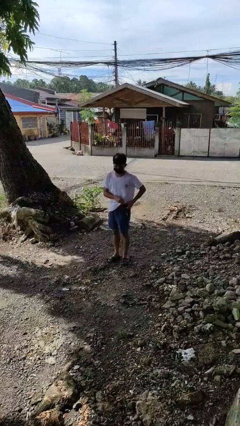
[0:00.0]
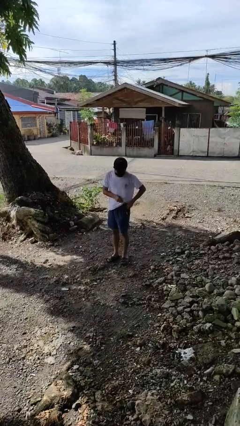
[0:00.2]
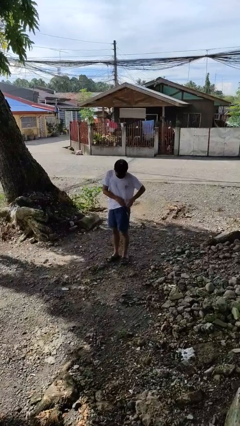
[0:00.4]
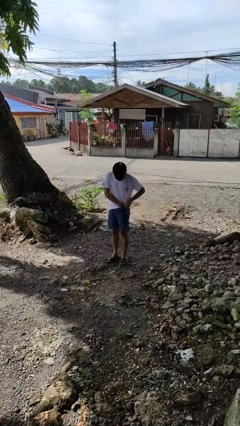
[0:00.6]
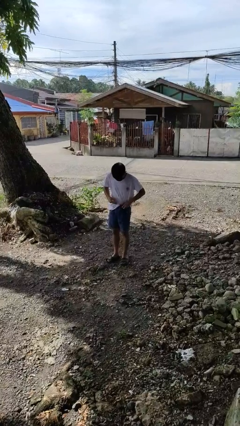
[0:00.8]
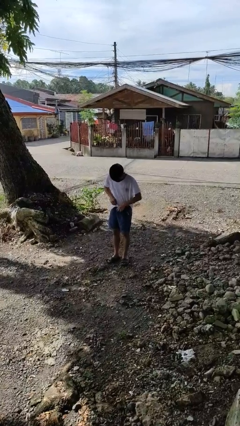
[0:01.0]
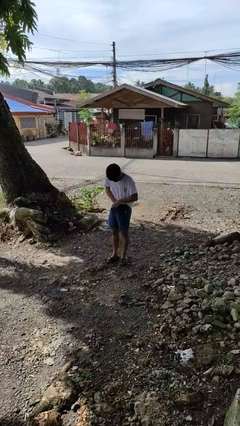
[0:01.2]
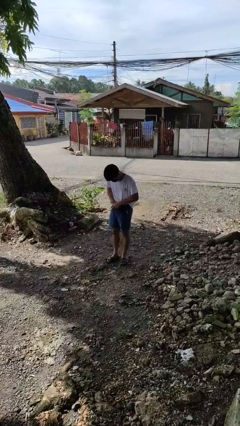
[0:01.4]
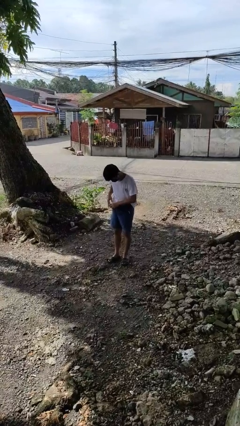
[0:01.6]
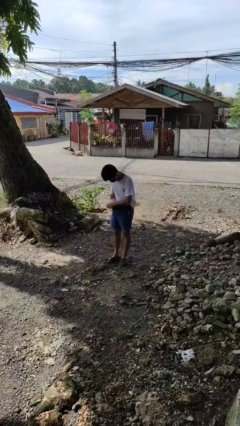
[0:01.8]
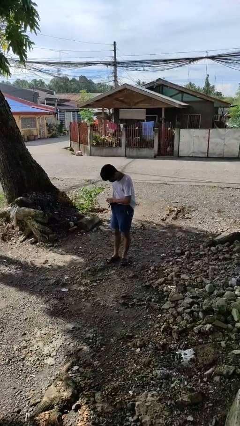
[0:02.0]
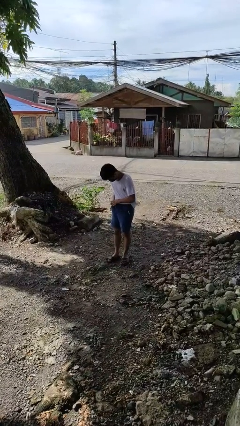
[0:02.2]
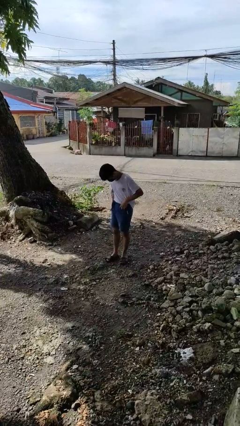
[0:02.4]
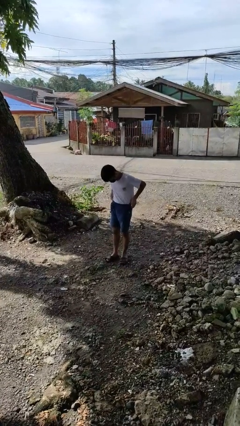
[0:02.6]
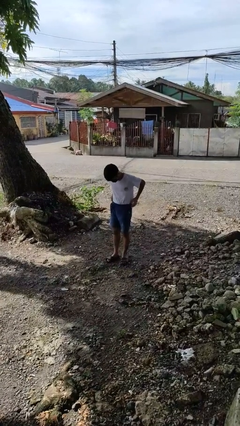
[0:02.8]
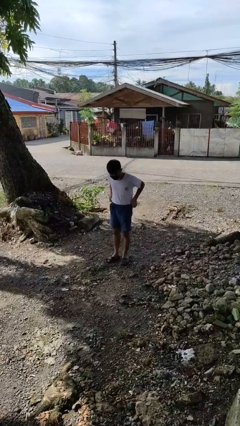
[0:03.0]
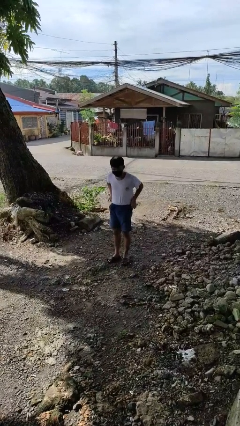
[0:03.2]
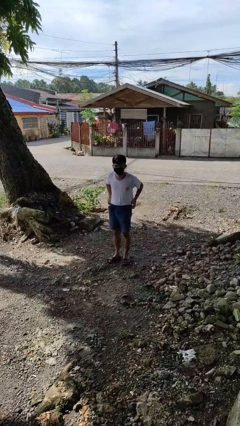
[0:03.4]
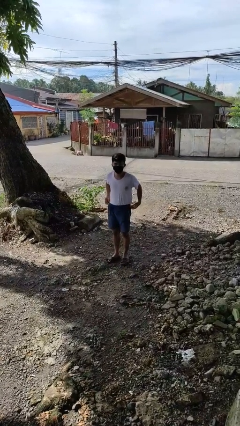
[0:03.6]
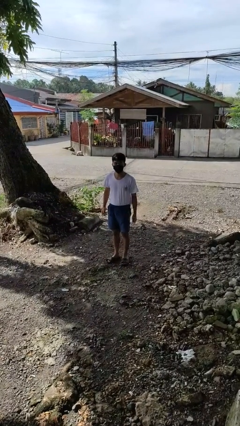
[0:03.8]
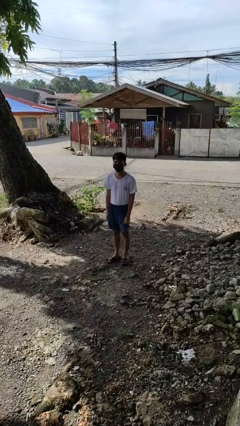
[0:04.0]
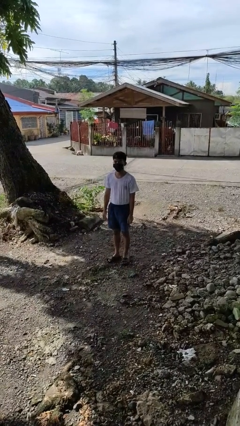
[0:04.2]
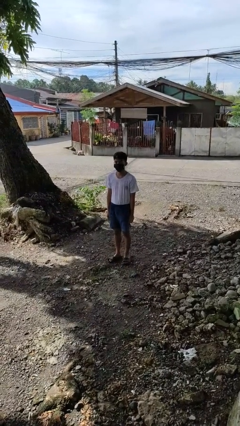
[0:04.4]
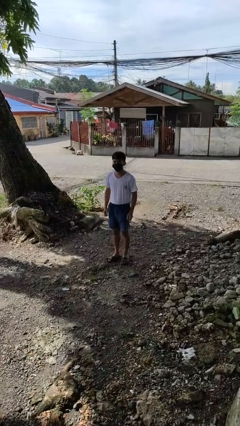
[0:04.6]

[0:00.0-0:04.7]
person tucks in shirt

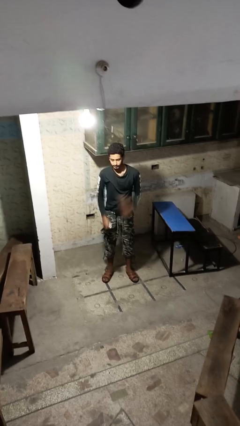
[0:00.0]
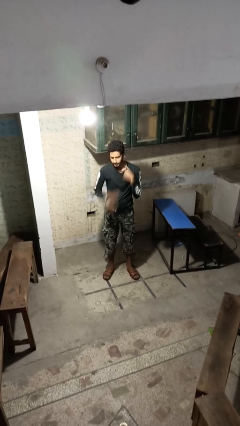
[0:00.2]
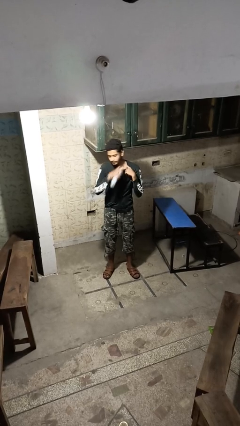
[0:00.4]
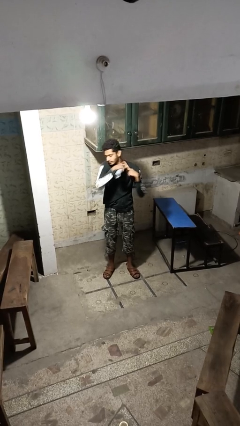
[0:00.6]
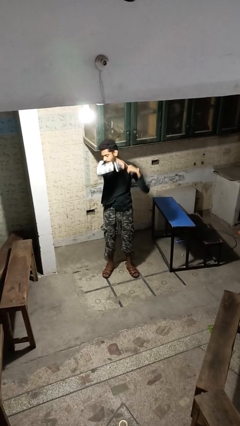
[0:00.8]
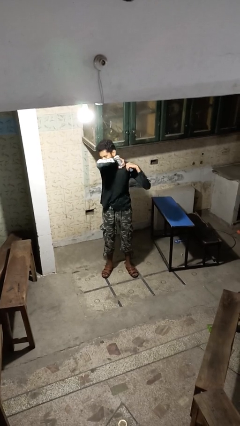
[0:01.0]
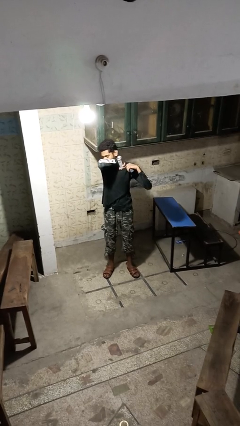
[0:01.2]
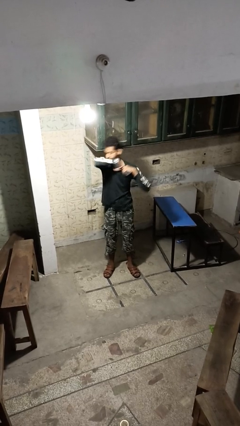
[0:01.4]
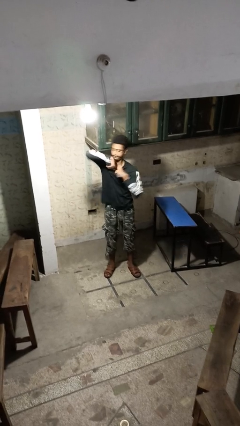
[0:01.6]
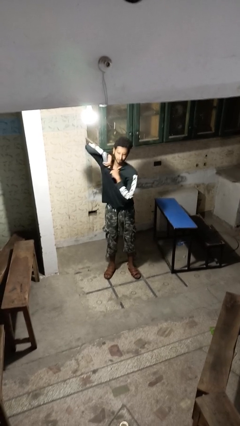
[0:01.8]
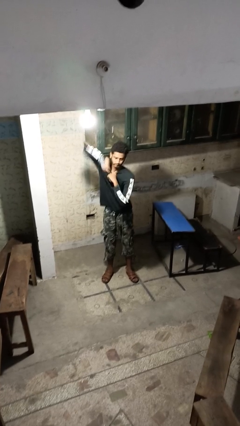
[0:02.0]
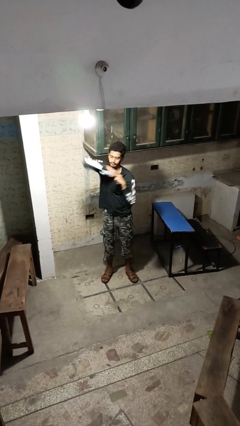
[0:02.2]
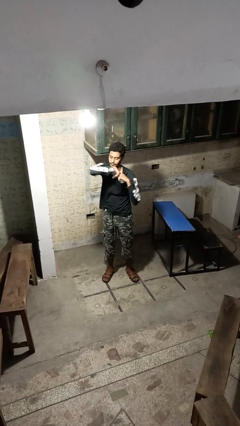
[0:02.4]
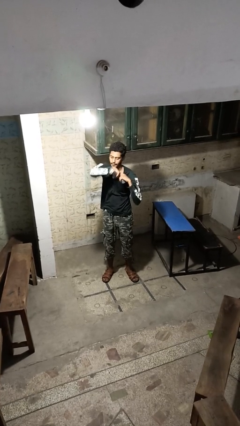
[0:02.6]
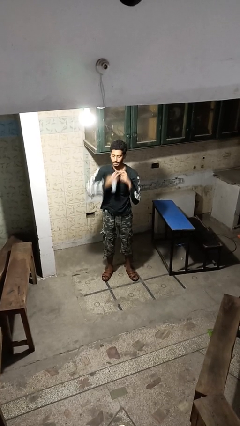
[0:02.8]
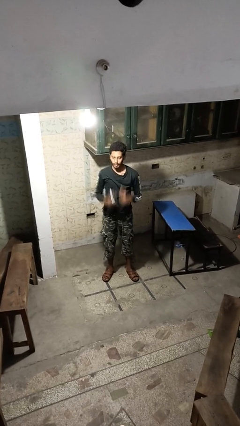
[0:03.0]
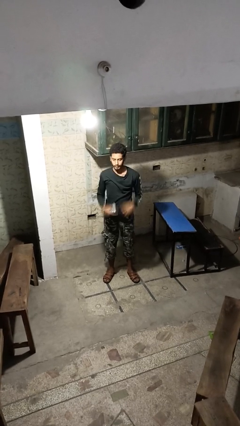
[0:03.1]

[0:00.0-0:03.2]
person applies deodorant

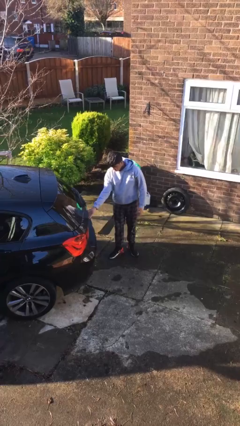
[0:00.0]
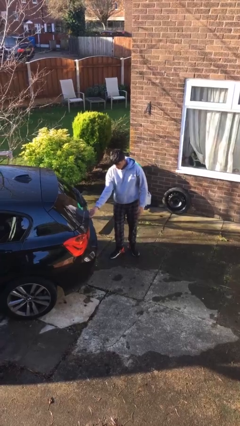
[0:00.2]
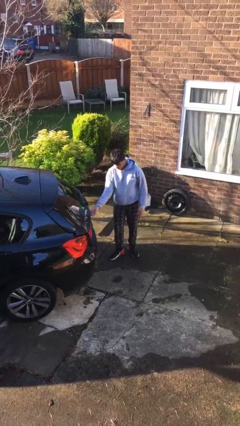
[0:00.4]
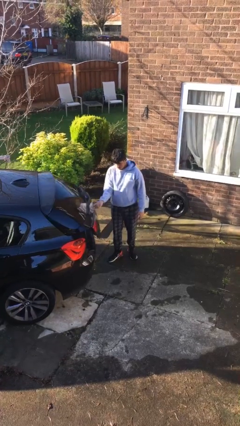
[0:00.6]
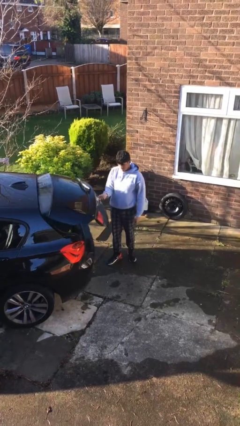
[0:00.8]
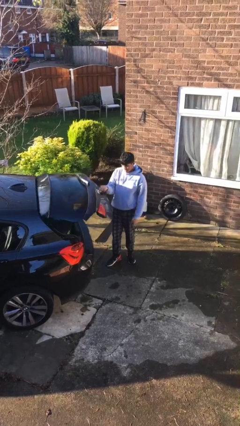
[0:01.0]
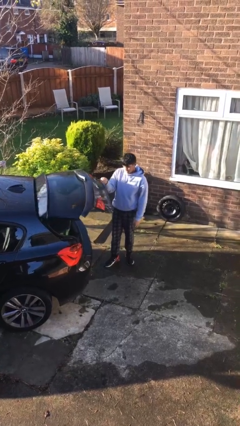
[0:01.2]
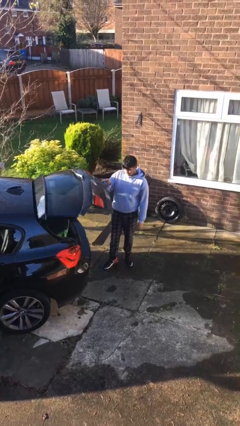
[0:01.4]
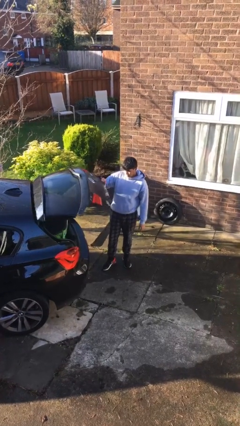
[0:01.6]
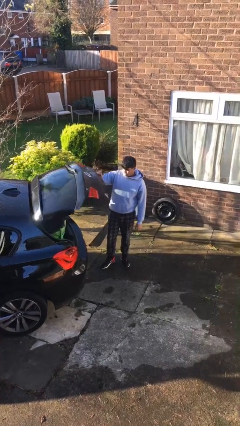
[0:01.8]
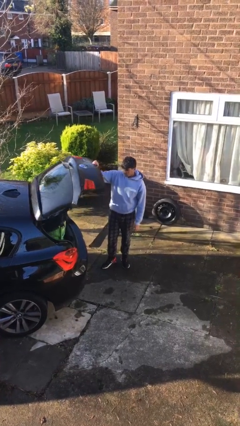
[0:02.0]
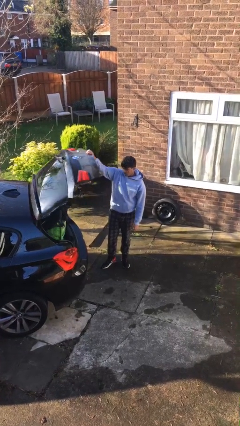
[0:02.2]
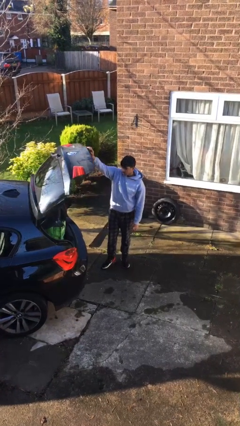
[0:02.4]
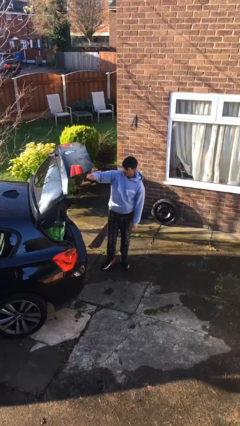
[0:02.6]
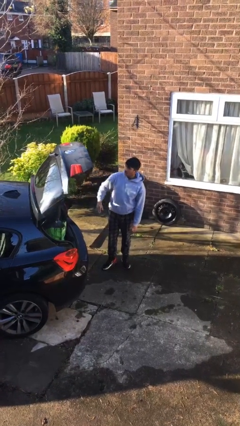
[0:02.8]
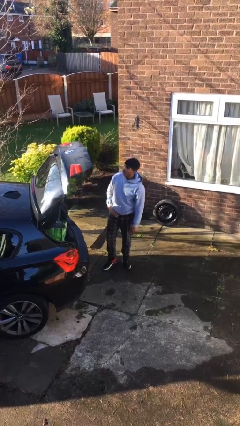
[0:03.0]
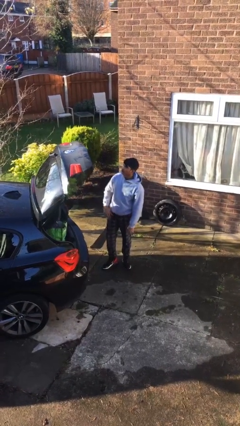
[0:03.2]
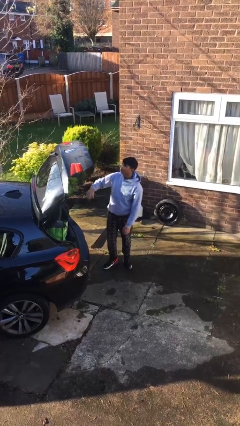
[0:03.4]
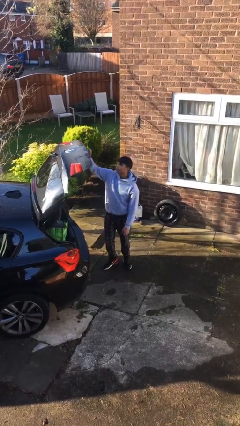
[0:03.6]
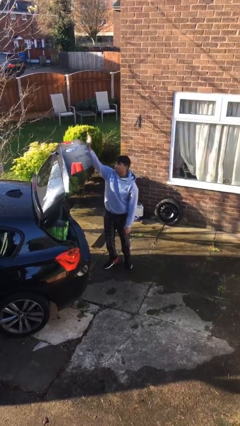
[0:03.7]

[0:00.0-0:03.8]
person opens car trunk

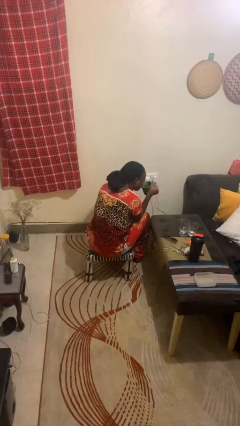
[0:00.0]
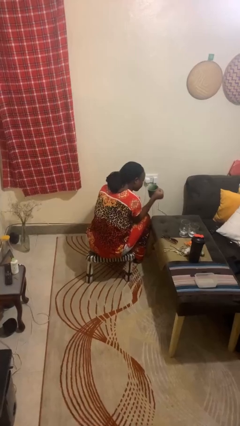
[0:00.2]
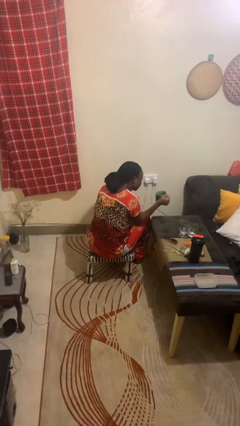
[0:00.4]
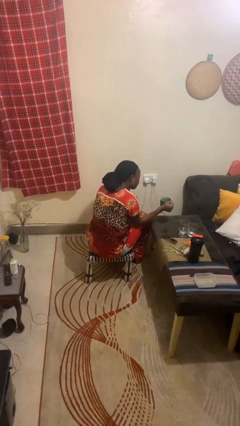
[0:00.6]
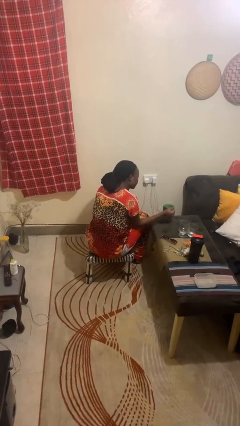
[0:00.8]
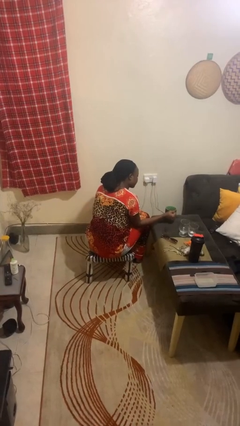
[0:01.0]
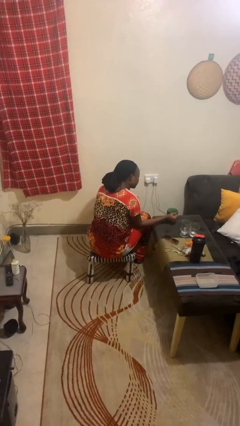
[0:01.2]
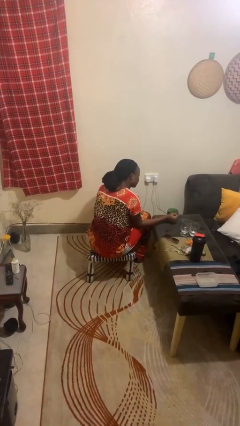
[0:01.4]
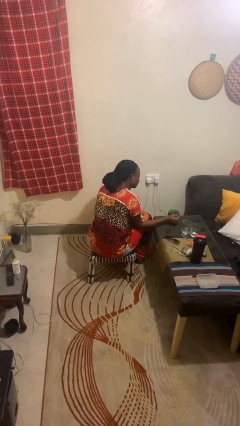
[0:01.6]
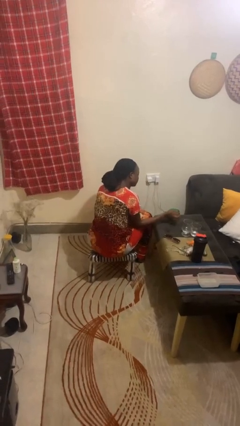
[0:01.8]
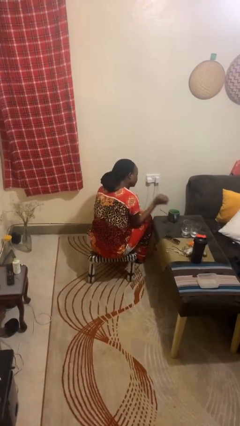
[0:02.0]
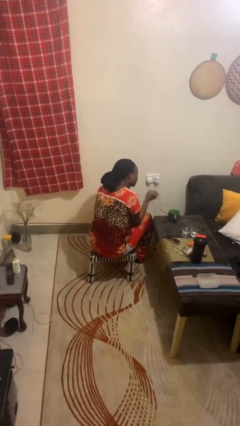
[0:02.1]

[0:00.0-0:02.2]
person puts down object on table

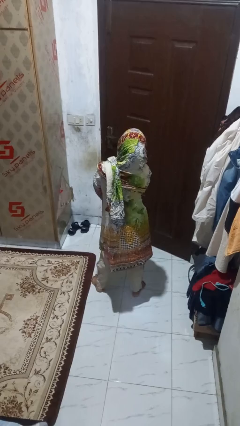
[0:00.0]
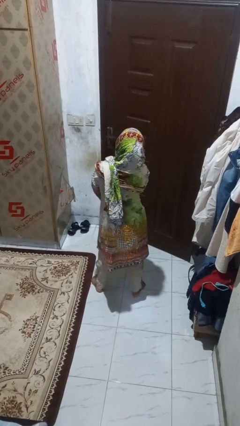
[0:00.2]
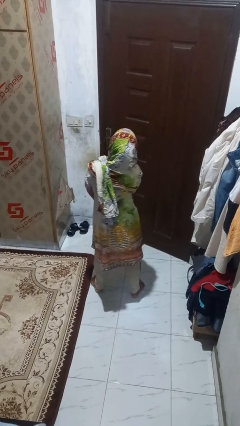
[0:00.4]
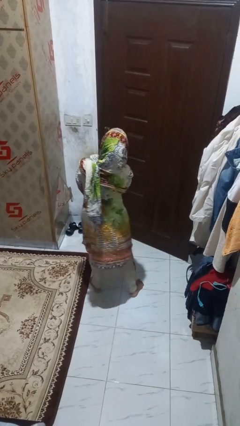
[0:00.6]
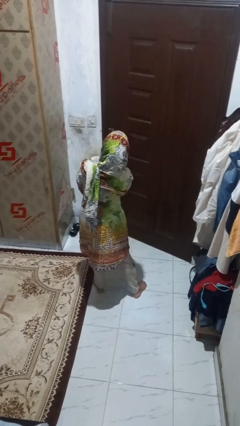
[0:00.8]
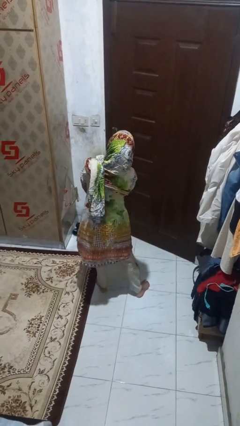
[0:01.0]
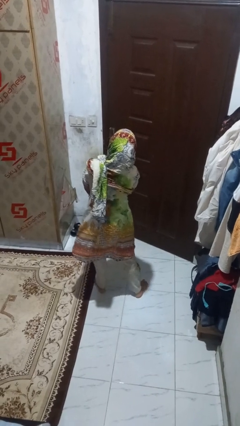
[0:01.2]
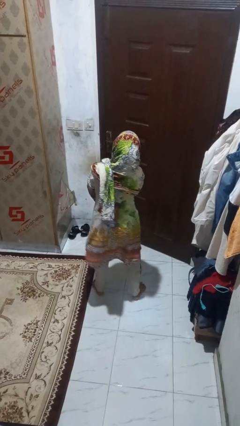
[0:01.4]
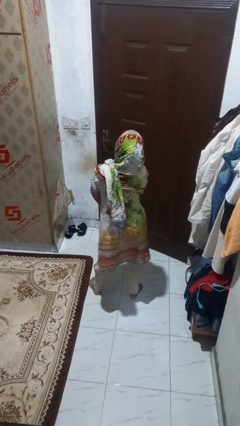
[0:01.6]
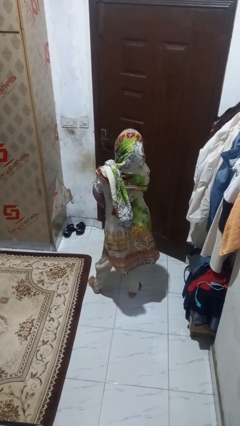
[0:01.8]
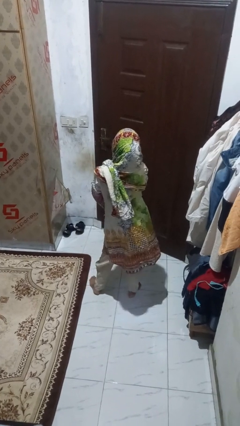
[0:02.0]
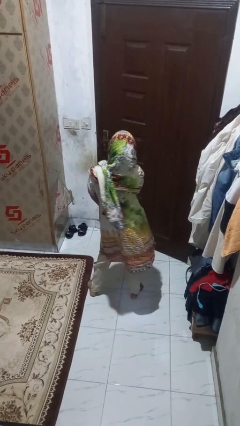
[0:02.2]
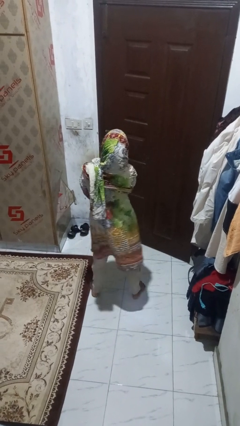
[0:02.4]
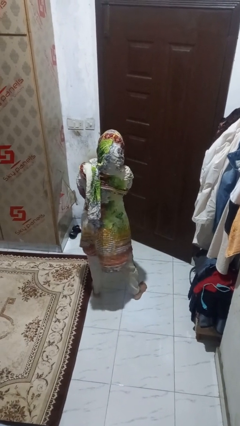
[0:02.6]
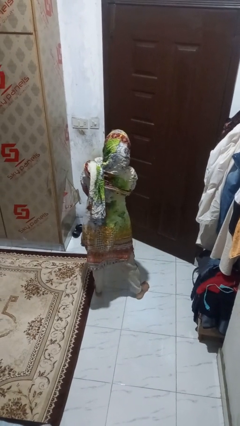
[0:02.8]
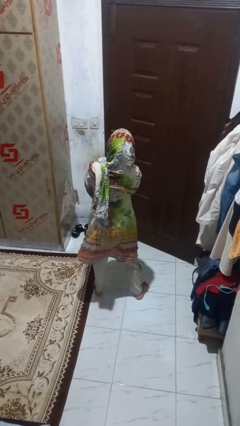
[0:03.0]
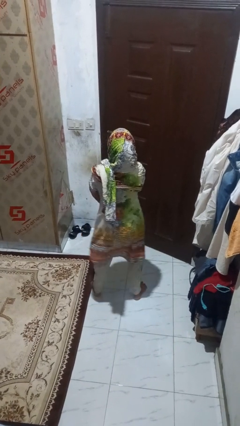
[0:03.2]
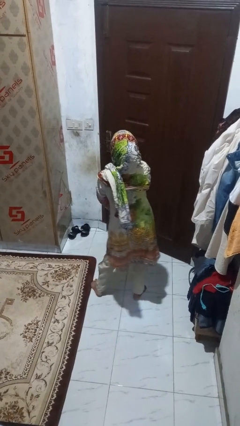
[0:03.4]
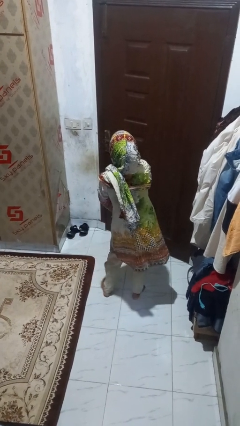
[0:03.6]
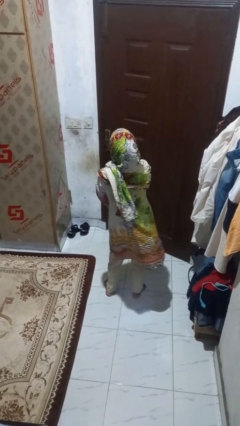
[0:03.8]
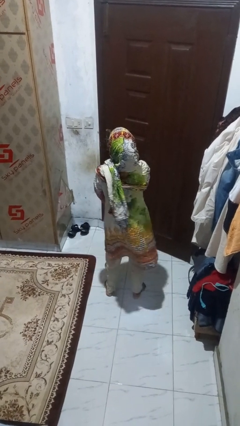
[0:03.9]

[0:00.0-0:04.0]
person wiggles hips
